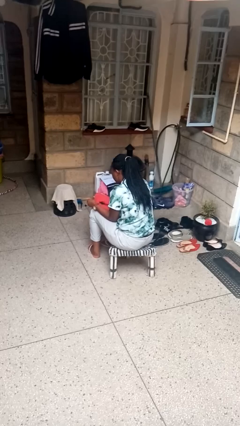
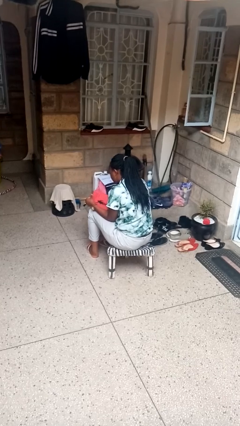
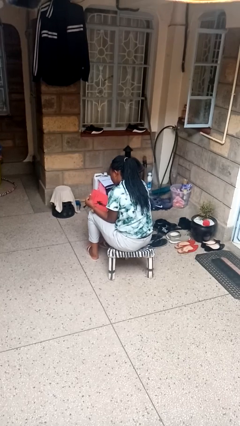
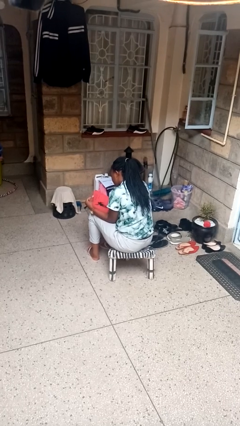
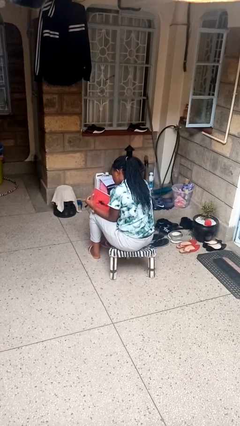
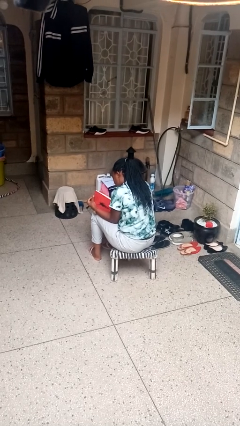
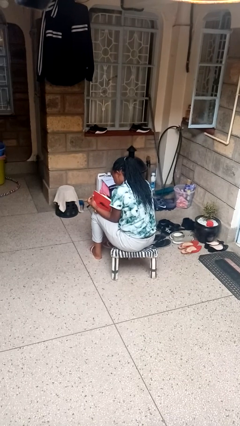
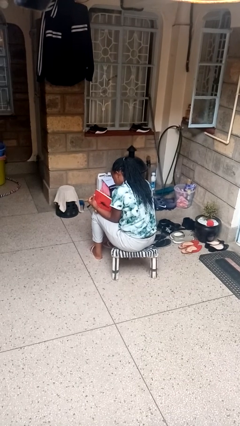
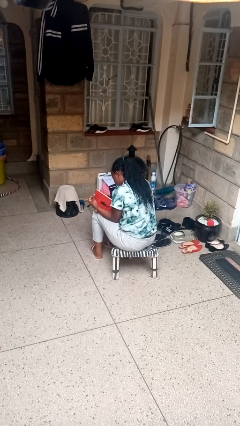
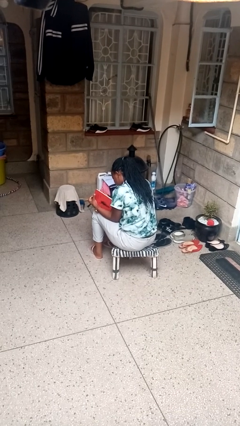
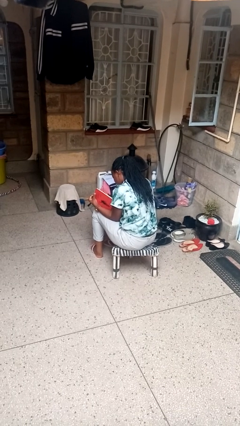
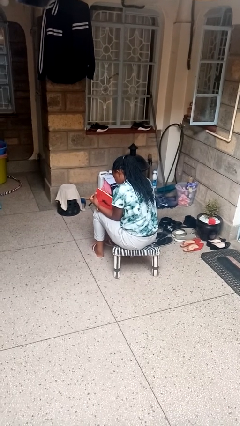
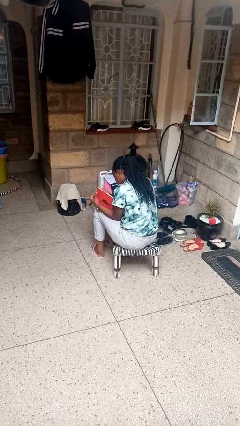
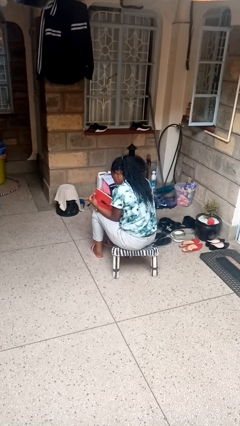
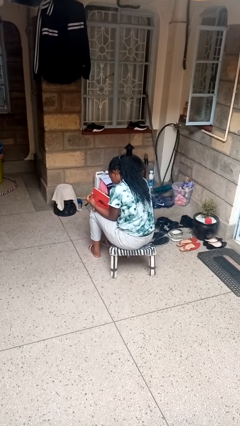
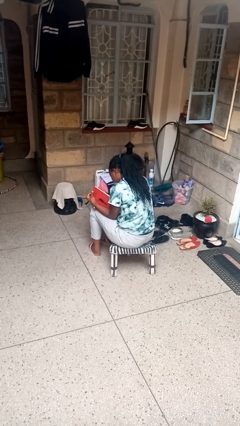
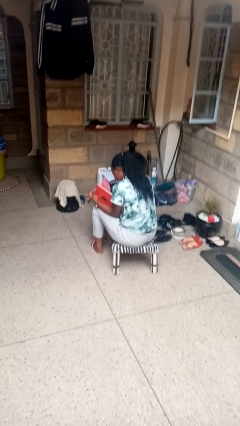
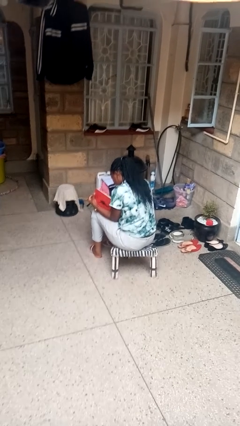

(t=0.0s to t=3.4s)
person reads book

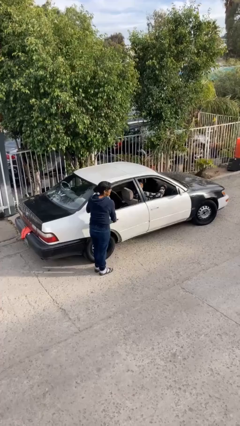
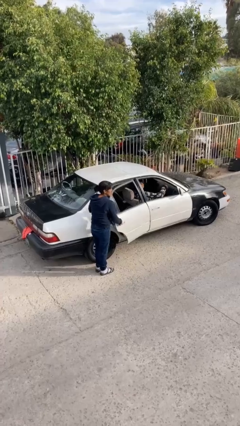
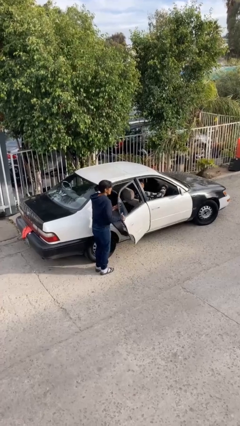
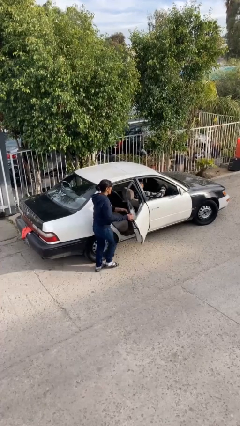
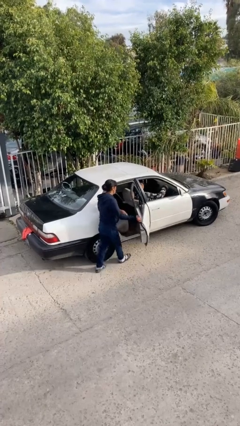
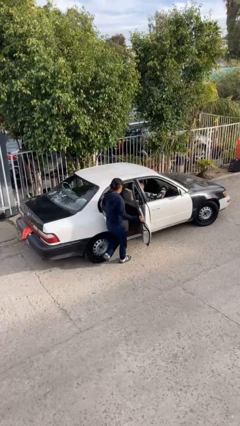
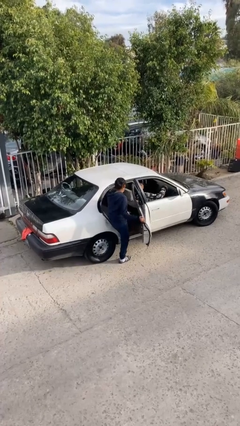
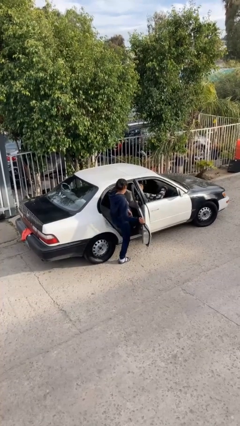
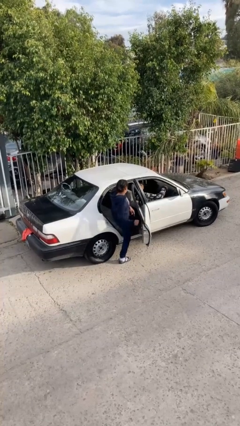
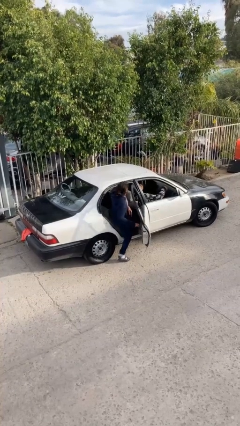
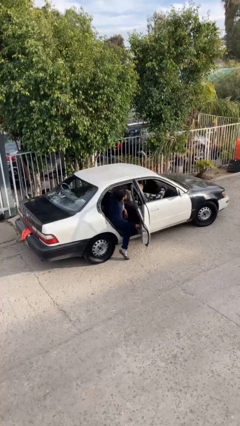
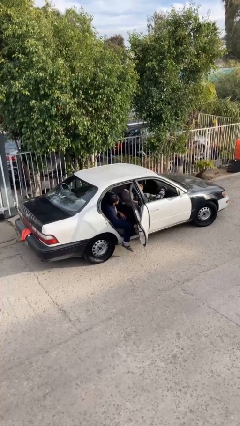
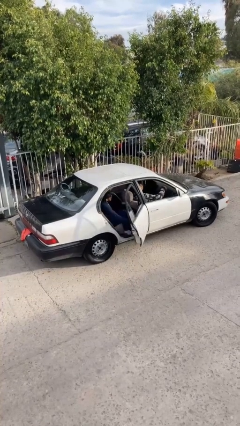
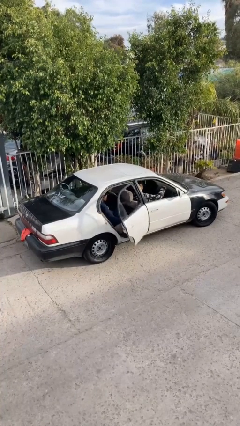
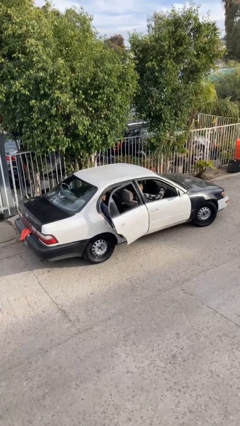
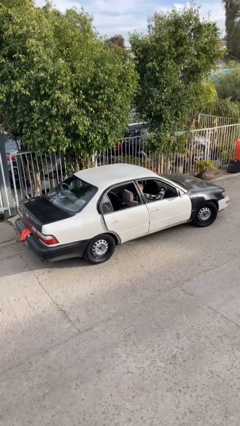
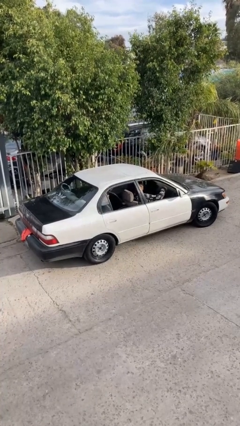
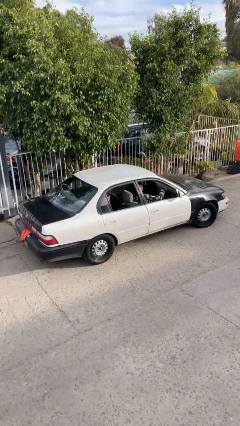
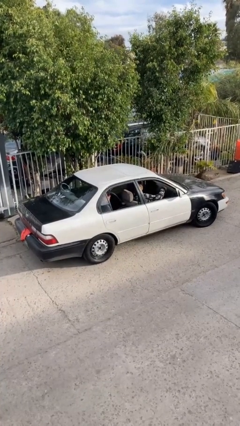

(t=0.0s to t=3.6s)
car picks up person

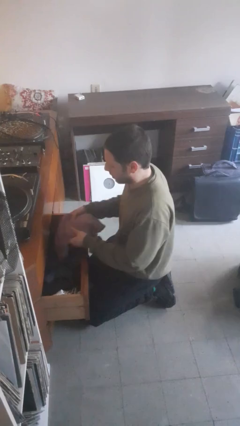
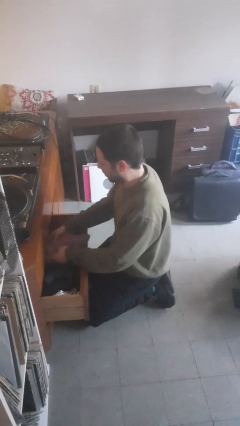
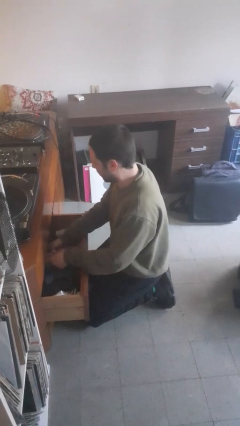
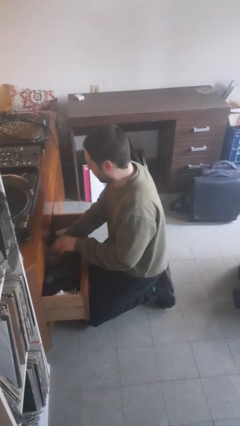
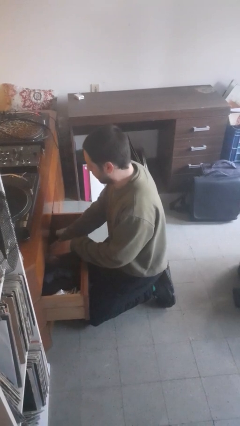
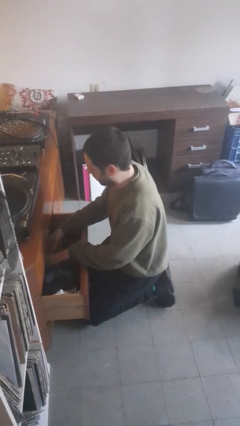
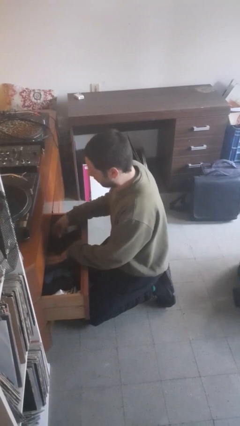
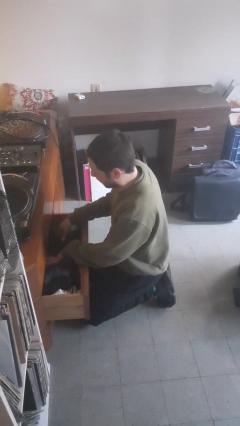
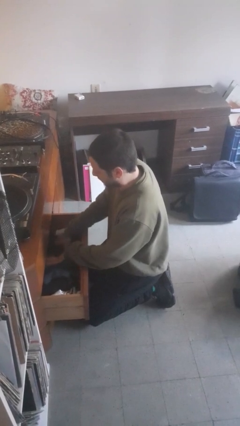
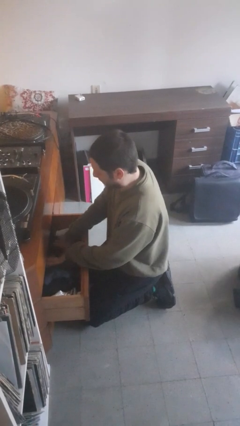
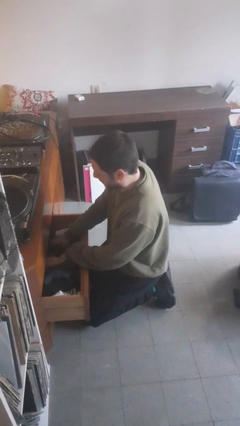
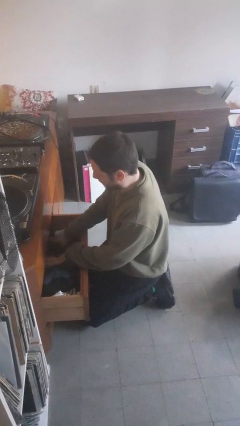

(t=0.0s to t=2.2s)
person puts clothes into dresser

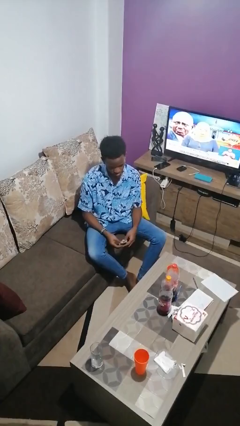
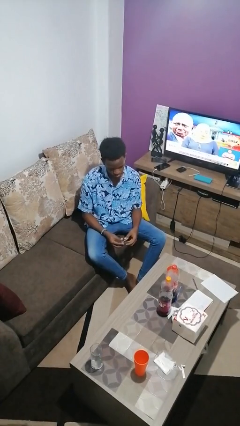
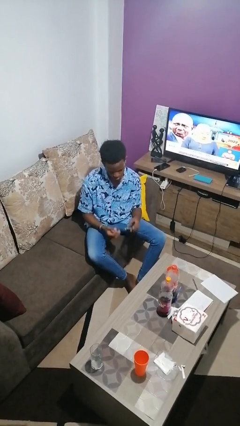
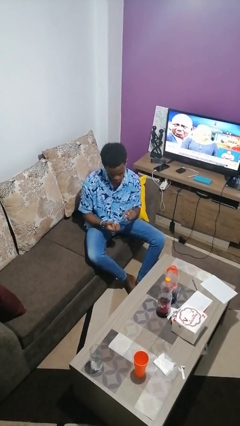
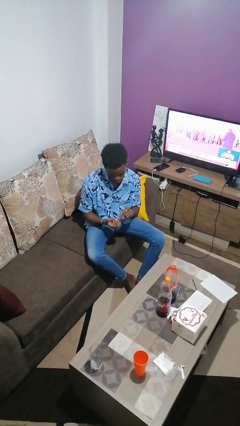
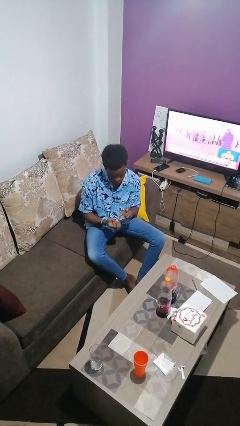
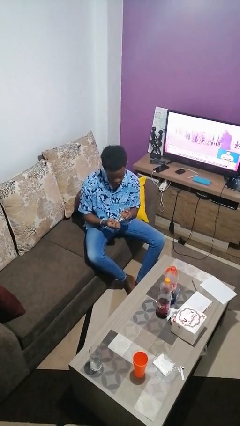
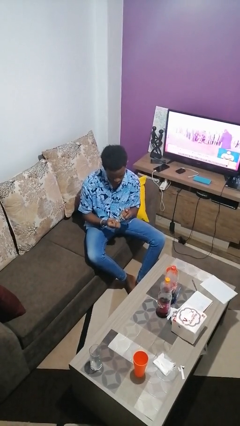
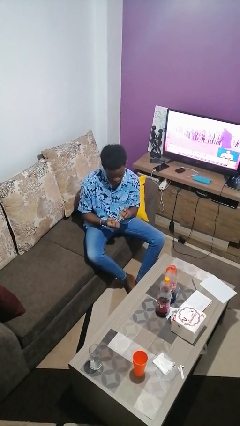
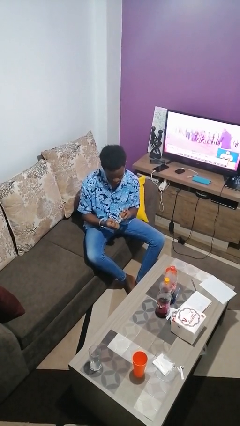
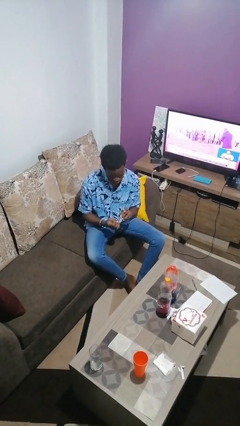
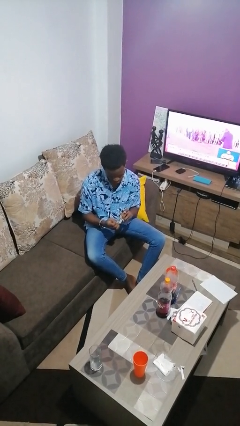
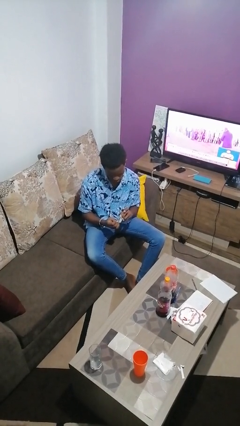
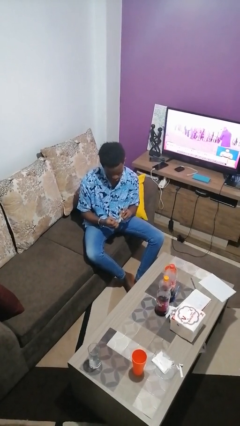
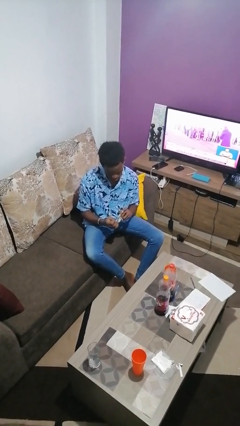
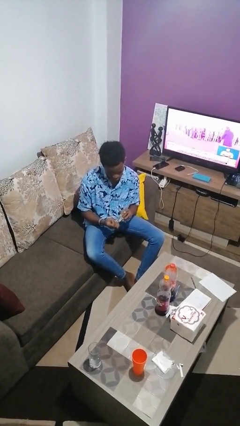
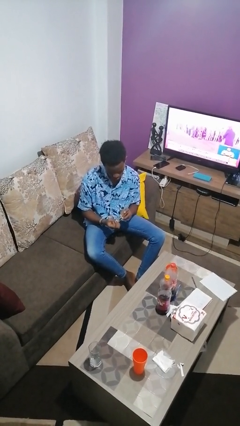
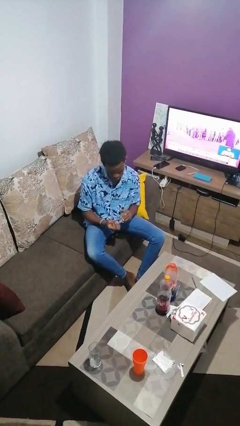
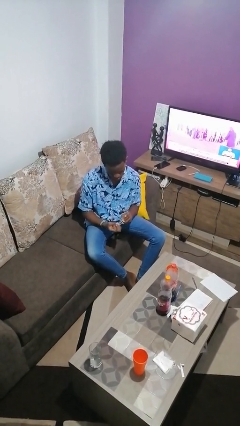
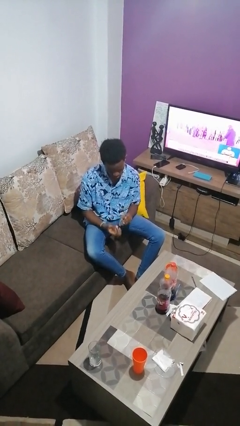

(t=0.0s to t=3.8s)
person clips fingernails

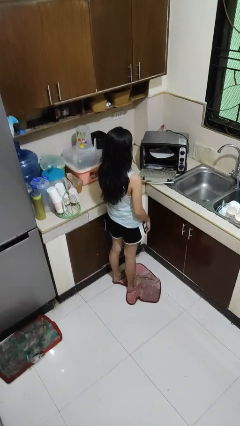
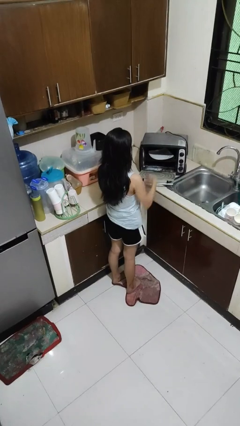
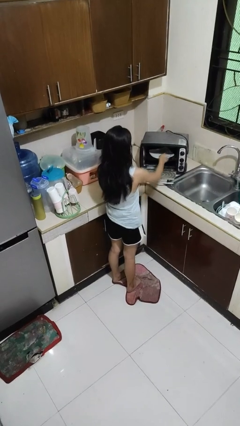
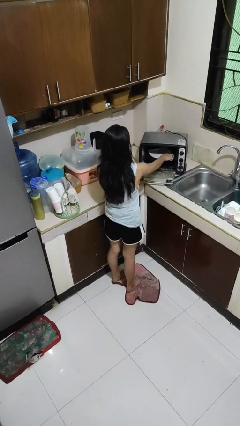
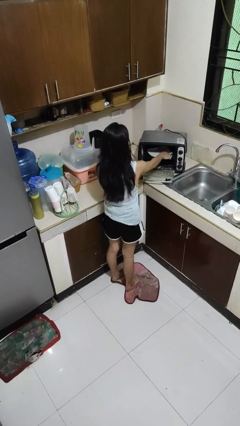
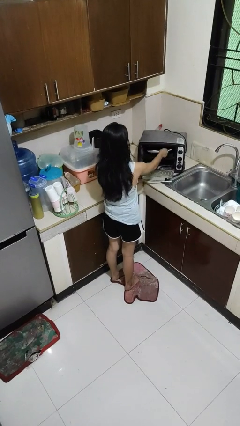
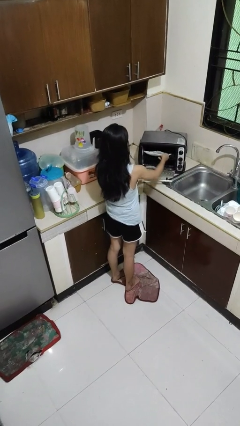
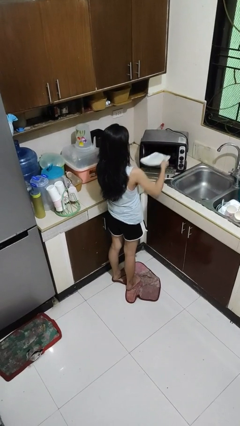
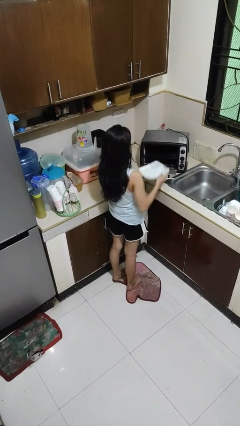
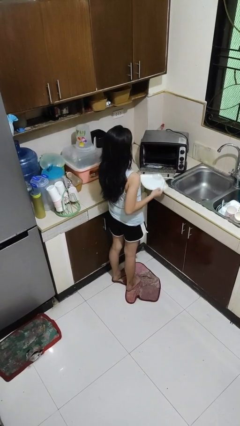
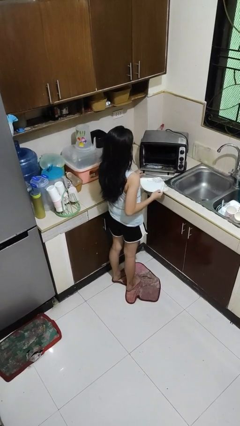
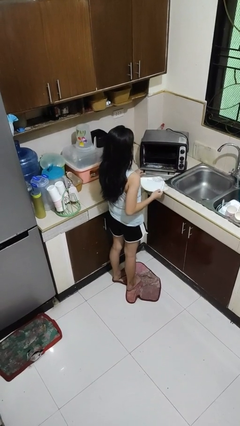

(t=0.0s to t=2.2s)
person takes object from microwave

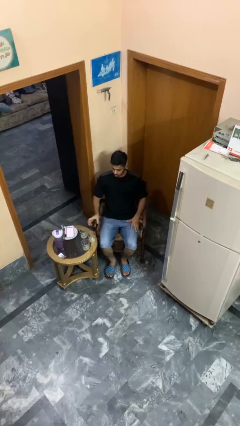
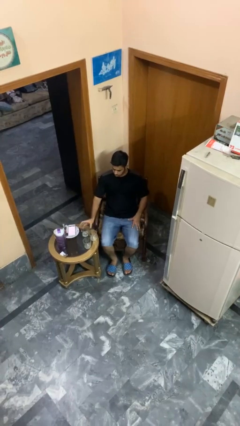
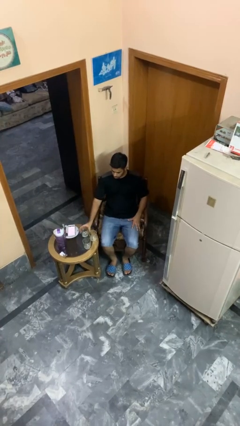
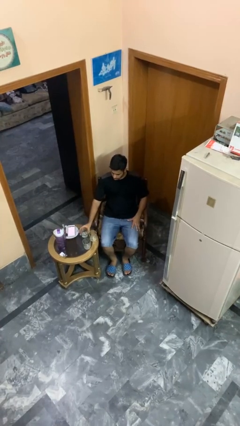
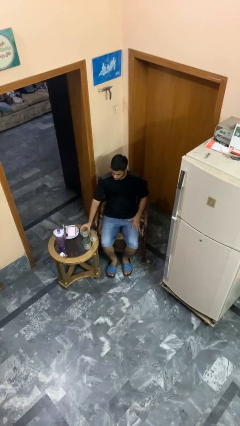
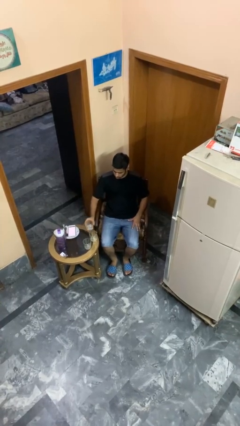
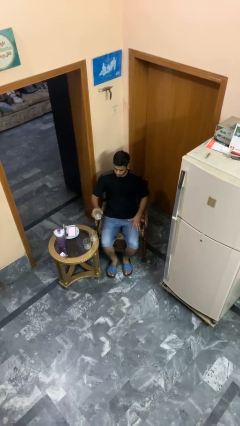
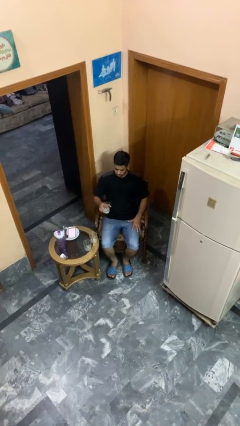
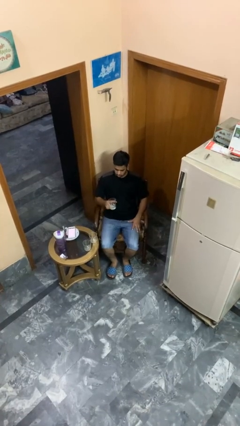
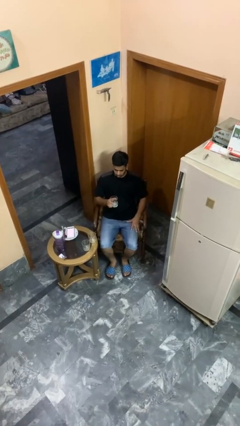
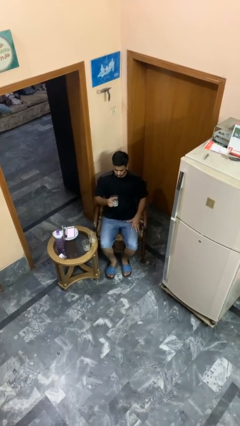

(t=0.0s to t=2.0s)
person picks up object from table
